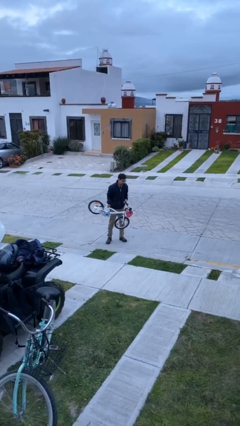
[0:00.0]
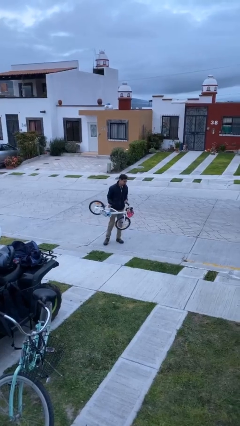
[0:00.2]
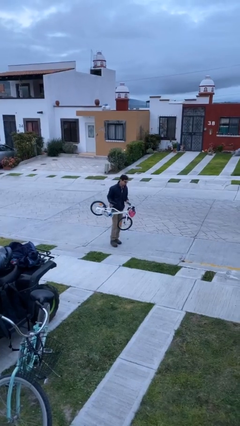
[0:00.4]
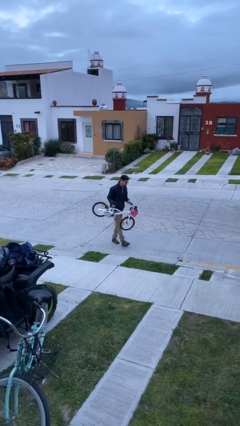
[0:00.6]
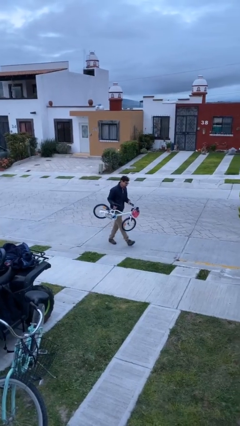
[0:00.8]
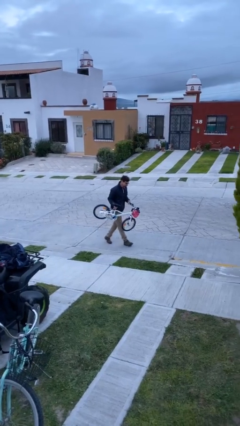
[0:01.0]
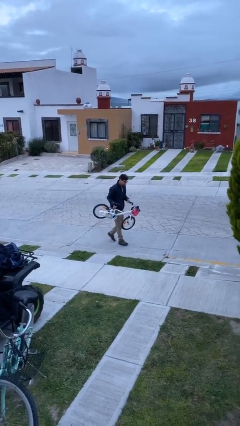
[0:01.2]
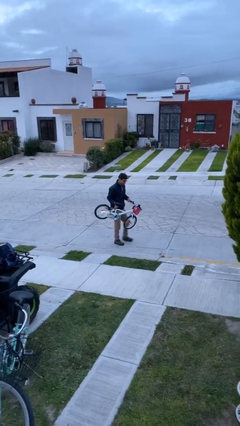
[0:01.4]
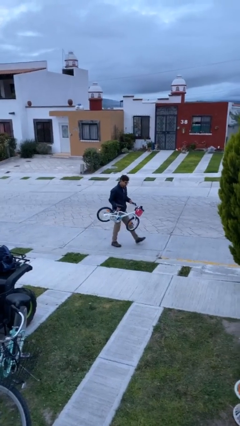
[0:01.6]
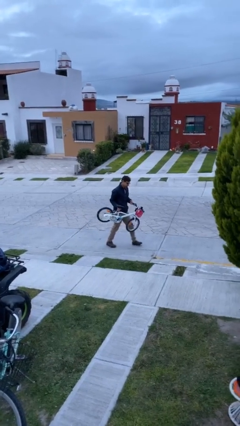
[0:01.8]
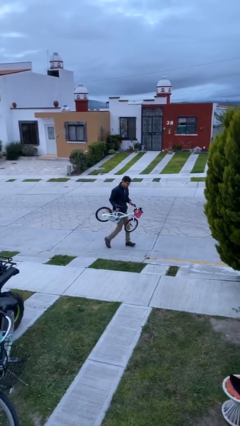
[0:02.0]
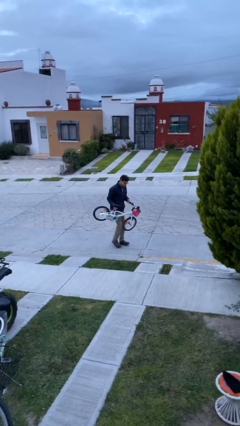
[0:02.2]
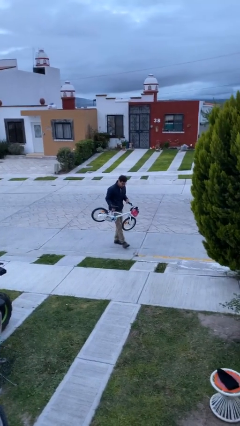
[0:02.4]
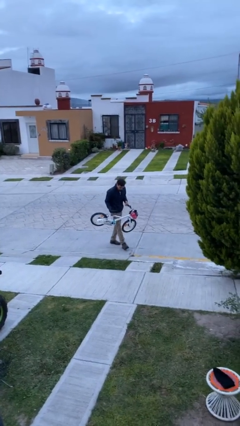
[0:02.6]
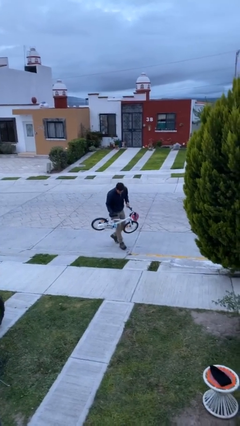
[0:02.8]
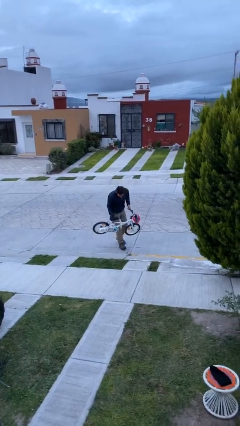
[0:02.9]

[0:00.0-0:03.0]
person carries heavy object

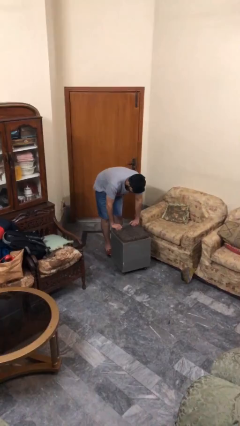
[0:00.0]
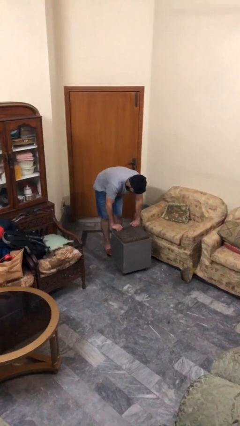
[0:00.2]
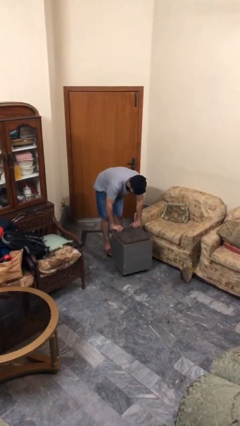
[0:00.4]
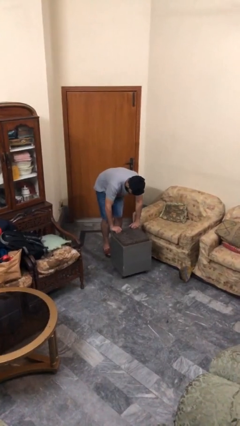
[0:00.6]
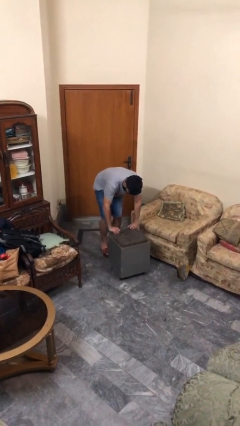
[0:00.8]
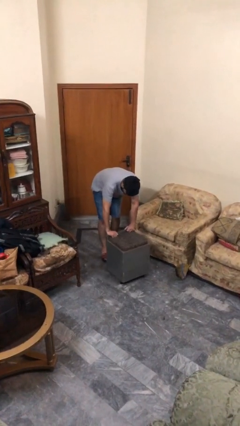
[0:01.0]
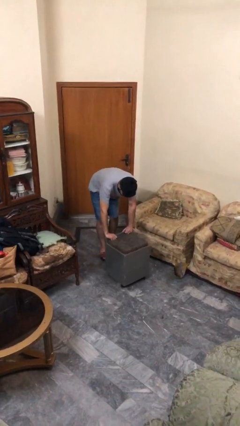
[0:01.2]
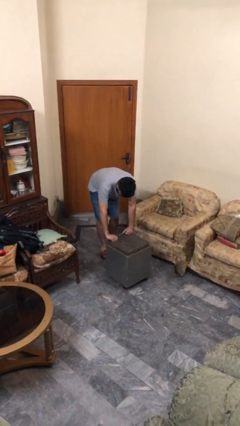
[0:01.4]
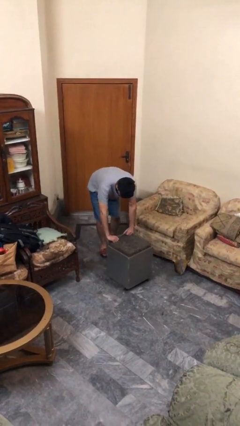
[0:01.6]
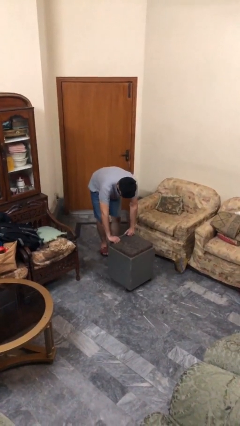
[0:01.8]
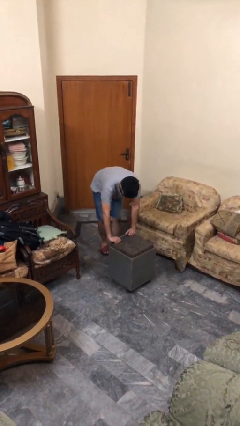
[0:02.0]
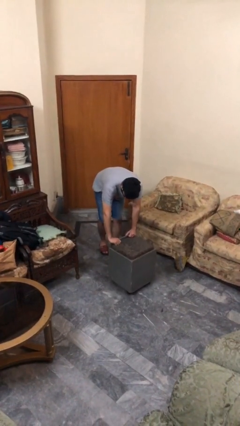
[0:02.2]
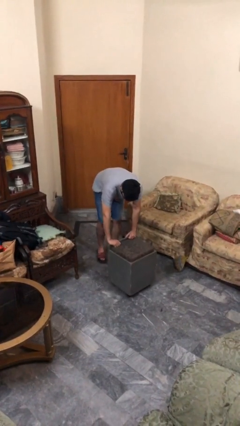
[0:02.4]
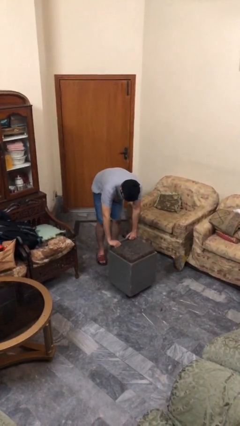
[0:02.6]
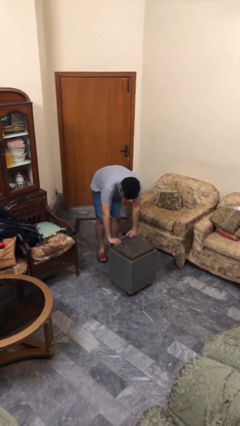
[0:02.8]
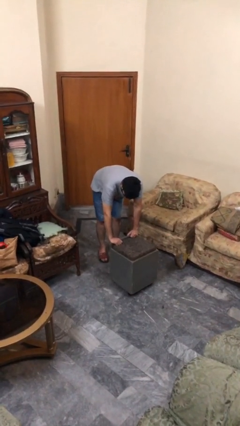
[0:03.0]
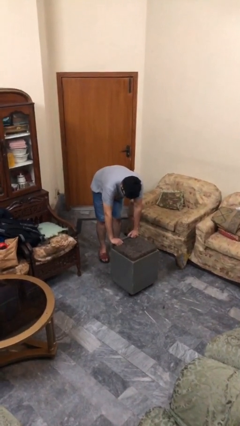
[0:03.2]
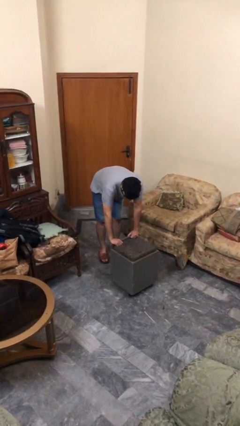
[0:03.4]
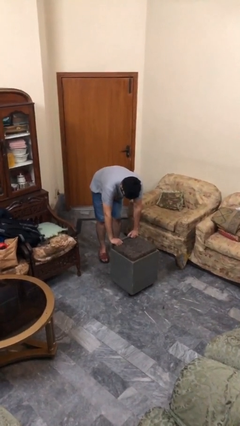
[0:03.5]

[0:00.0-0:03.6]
person pushes wheeled cart

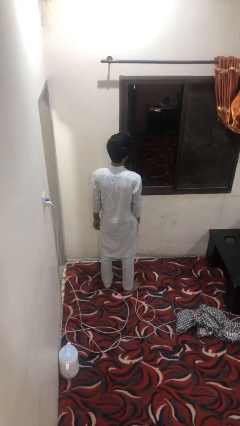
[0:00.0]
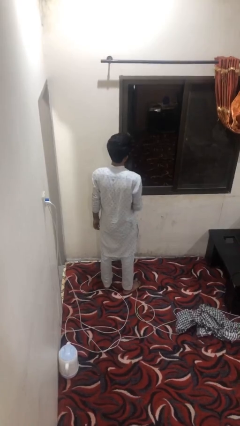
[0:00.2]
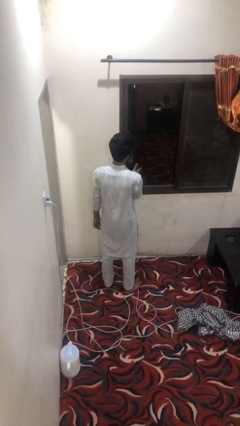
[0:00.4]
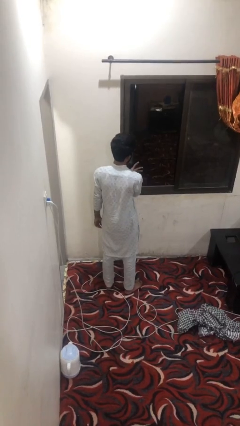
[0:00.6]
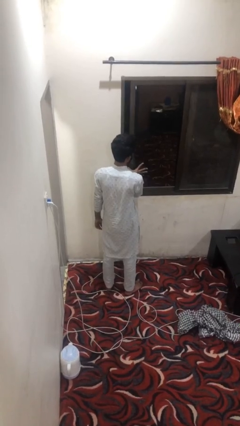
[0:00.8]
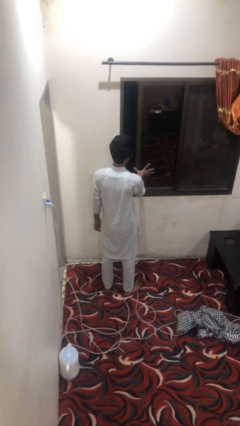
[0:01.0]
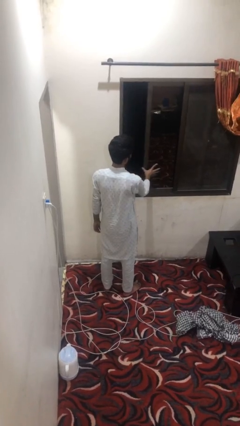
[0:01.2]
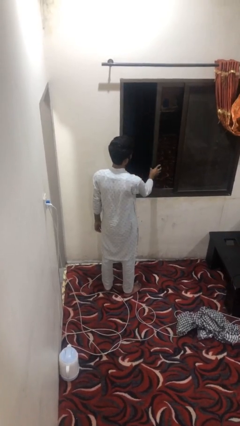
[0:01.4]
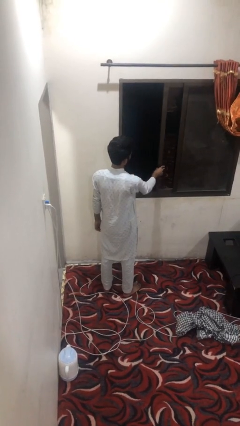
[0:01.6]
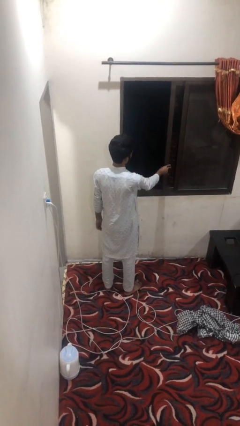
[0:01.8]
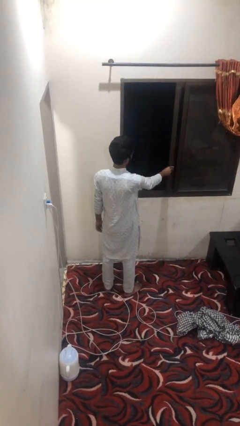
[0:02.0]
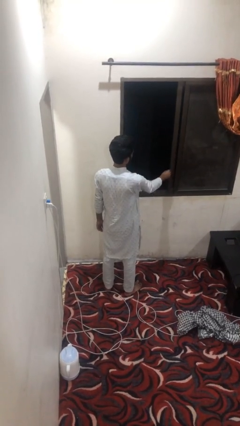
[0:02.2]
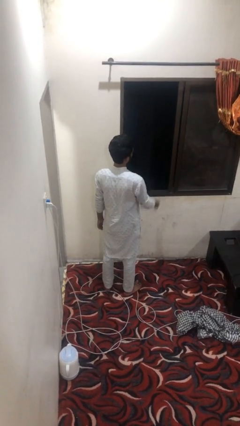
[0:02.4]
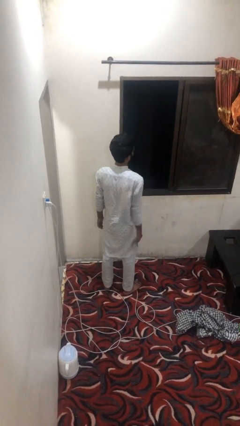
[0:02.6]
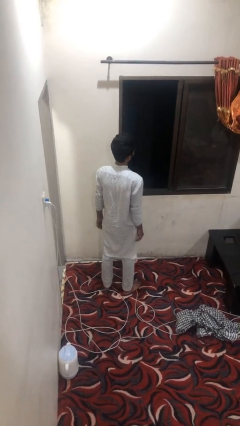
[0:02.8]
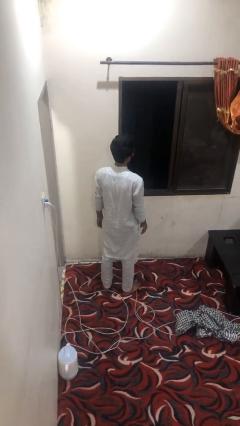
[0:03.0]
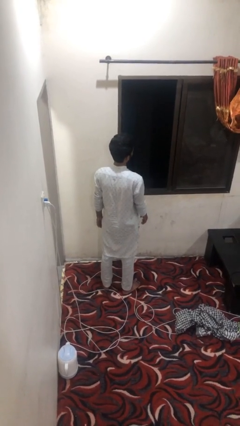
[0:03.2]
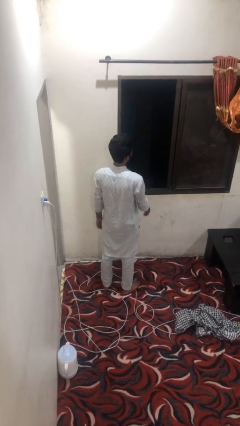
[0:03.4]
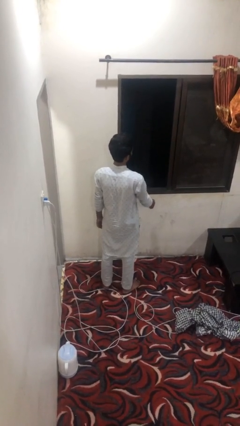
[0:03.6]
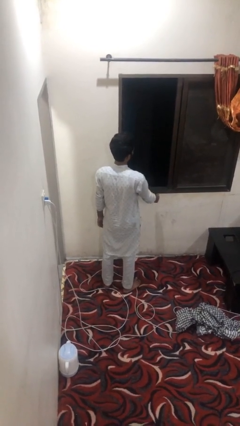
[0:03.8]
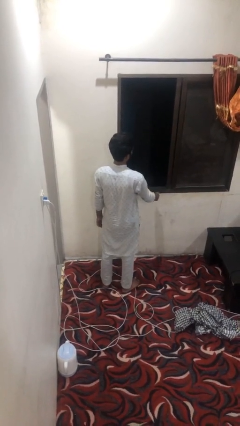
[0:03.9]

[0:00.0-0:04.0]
person opens home window

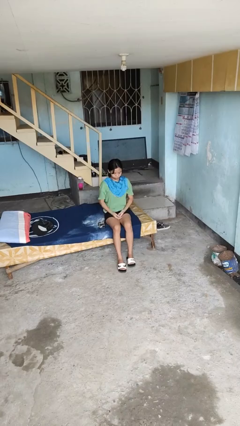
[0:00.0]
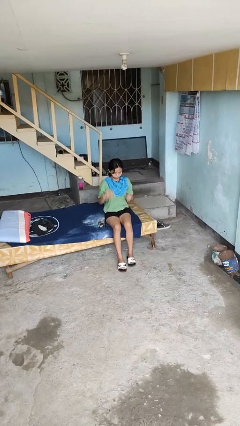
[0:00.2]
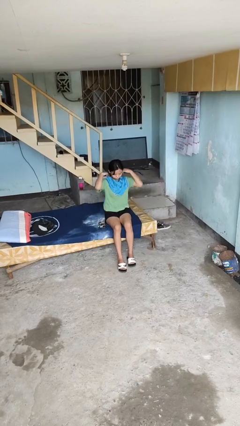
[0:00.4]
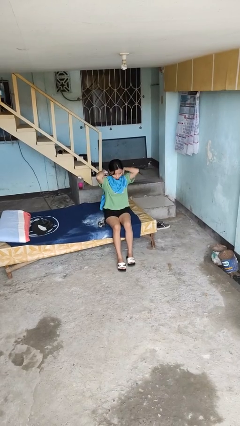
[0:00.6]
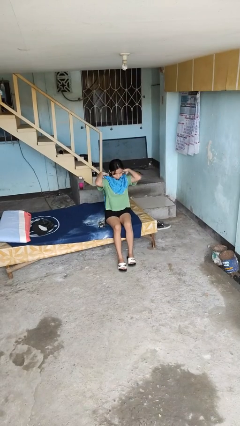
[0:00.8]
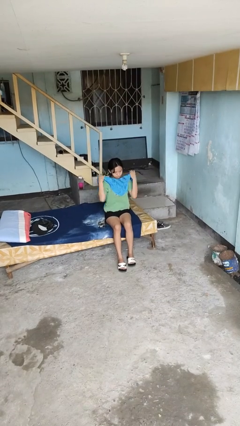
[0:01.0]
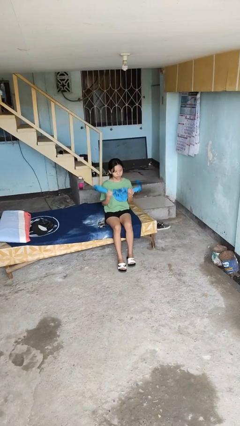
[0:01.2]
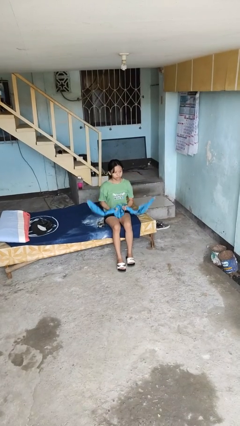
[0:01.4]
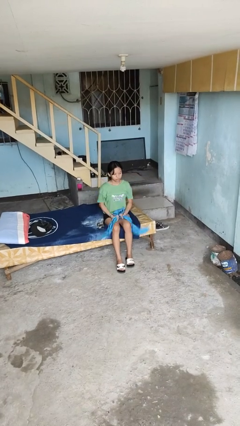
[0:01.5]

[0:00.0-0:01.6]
person takes off scarf

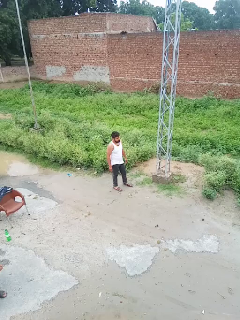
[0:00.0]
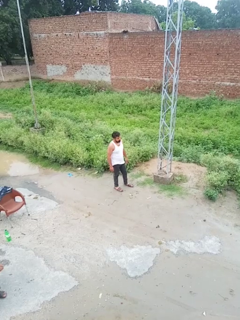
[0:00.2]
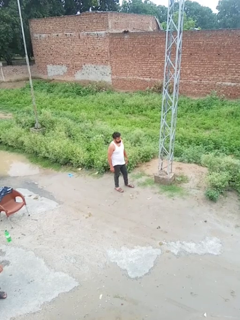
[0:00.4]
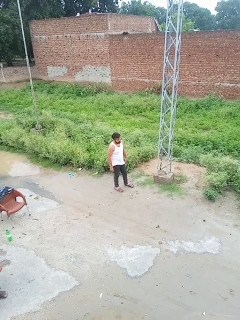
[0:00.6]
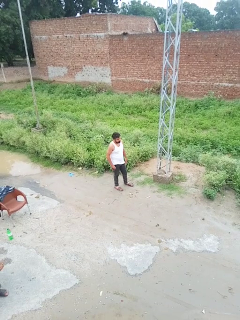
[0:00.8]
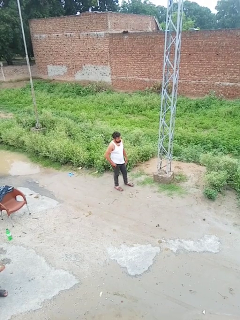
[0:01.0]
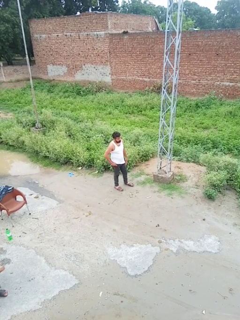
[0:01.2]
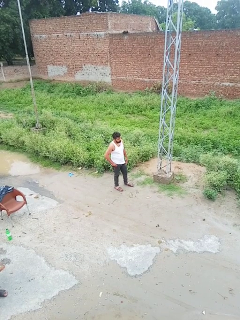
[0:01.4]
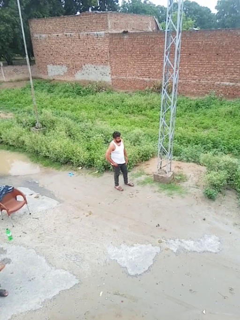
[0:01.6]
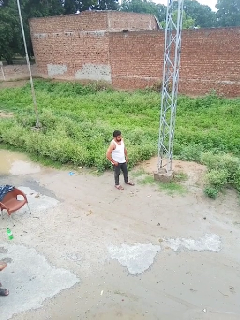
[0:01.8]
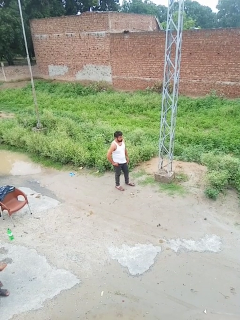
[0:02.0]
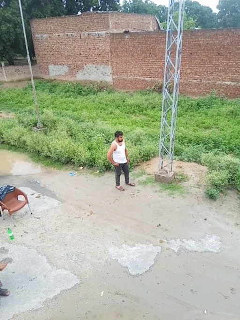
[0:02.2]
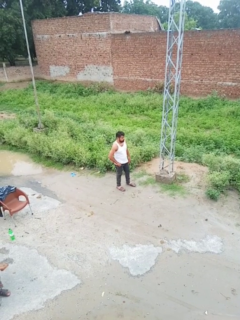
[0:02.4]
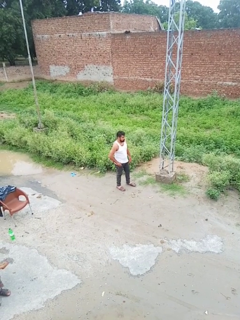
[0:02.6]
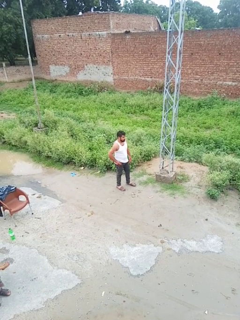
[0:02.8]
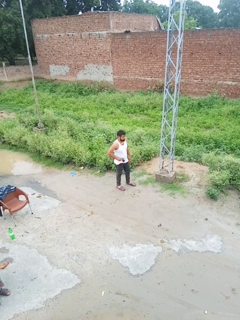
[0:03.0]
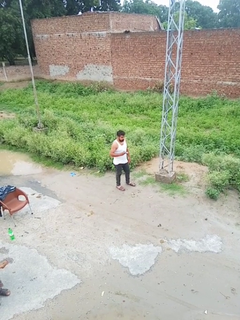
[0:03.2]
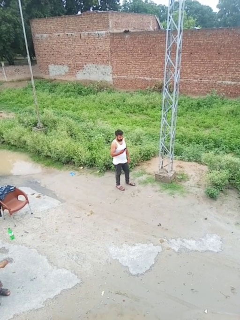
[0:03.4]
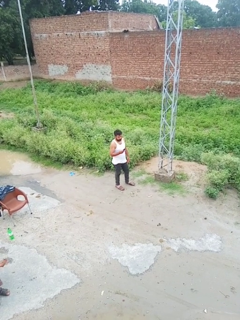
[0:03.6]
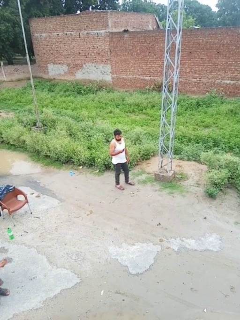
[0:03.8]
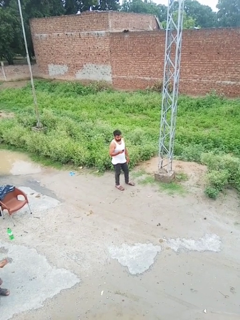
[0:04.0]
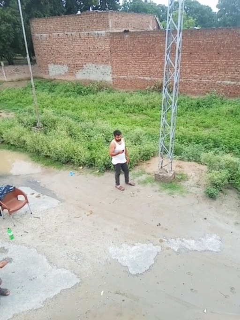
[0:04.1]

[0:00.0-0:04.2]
person takes phone from pocket

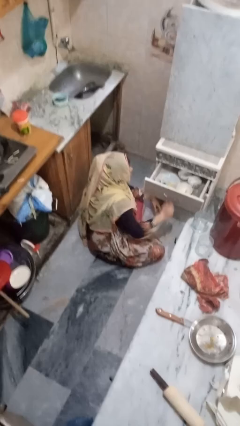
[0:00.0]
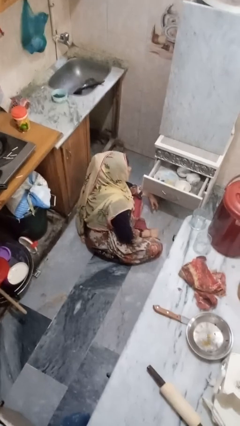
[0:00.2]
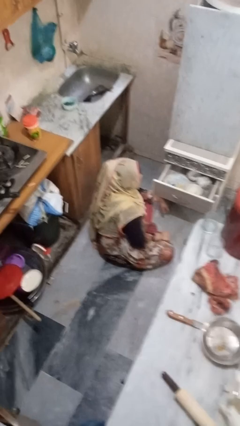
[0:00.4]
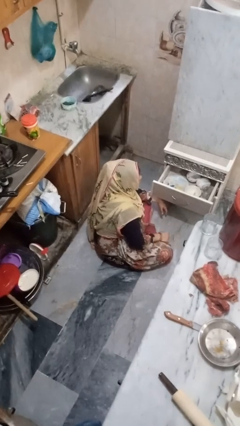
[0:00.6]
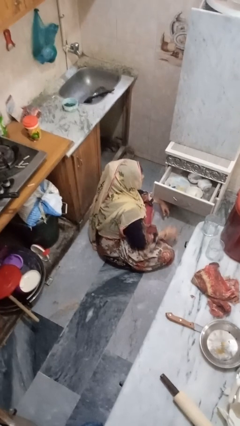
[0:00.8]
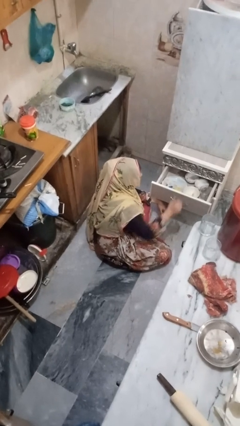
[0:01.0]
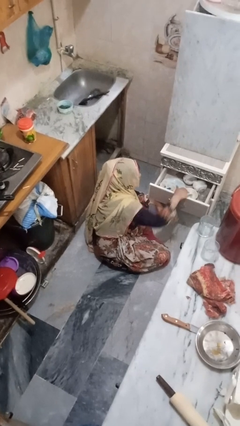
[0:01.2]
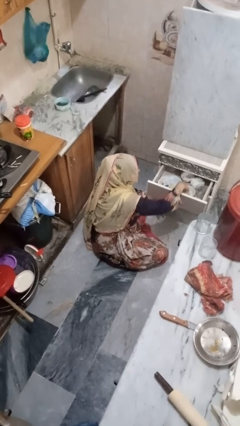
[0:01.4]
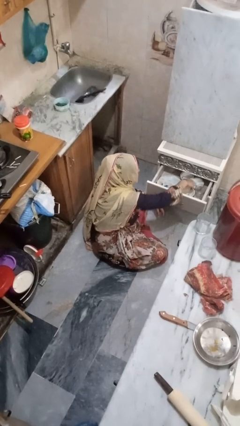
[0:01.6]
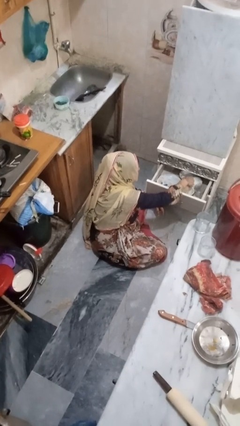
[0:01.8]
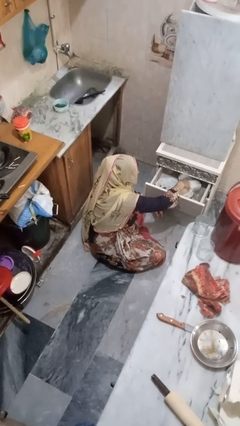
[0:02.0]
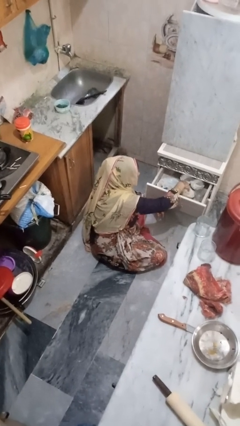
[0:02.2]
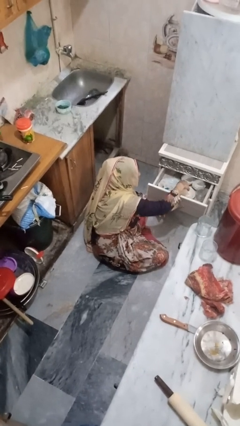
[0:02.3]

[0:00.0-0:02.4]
person searches in kitchen drawer
